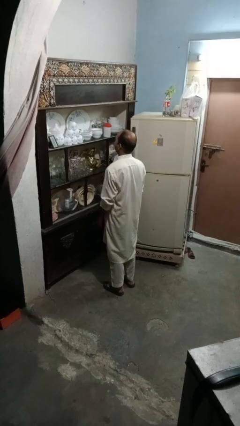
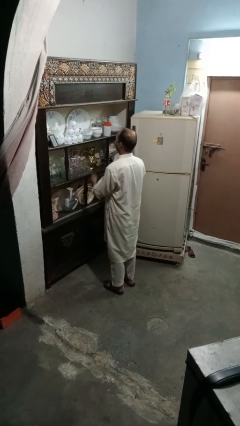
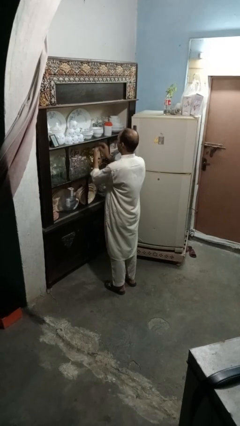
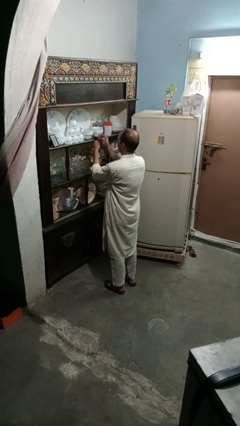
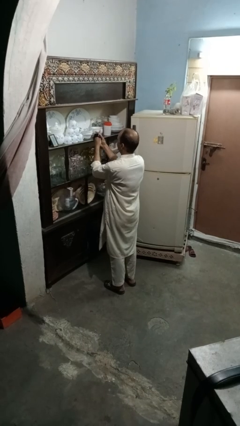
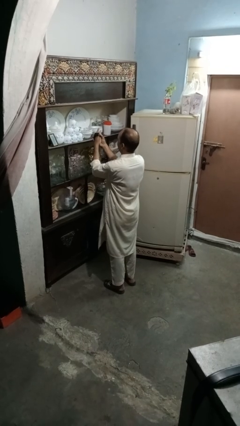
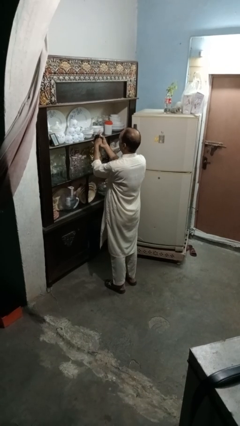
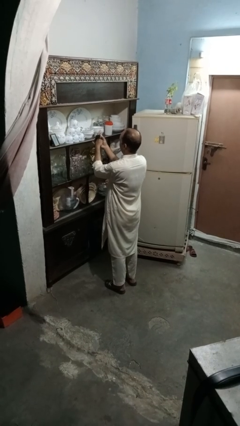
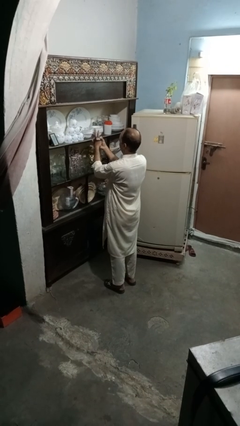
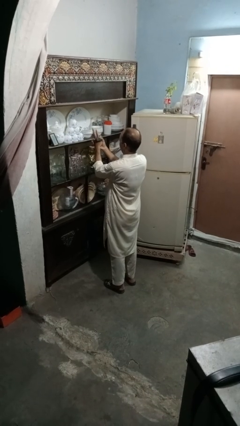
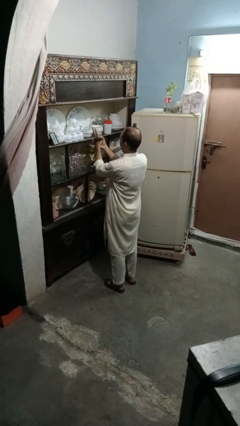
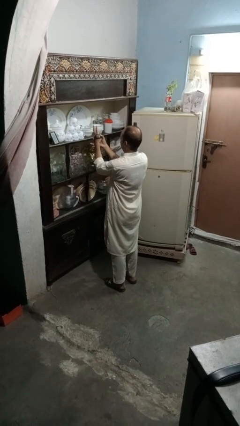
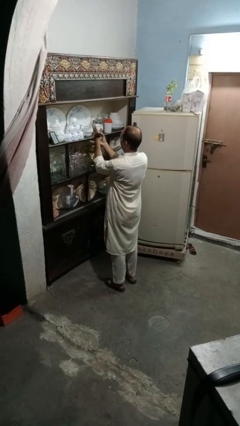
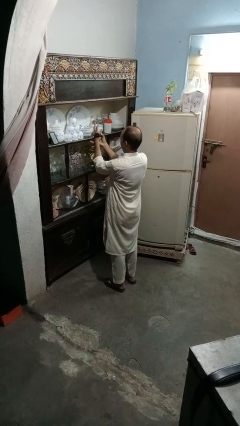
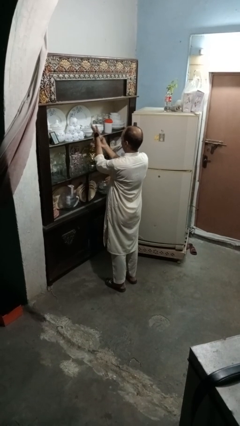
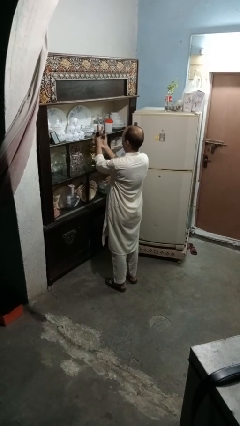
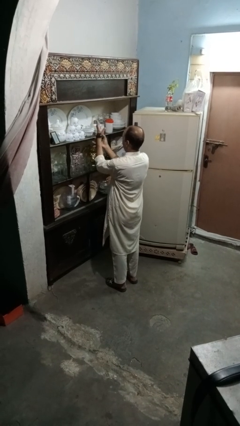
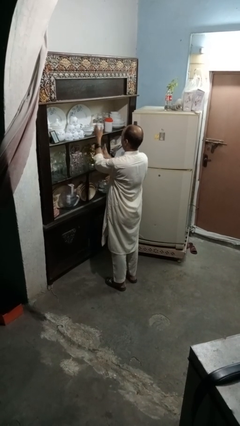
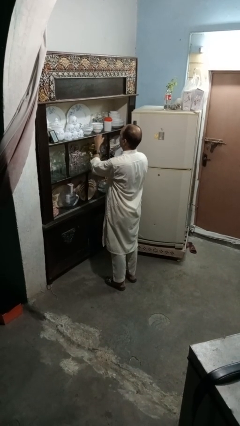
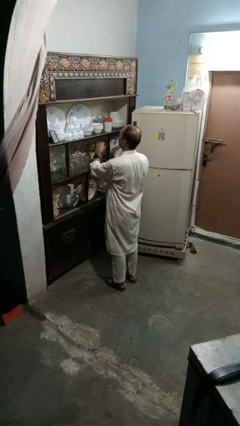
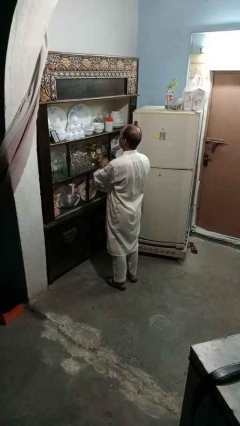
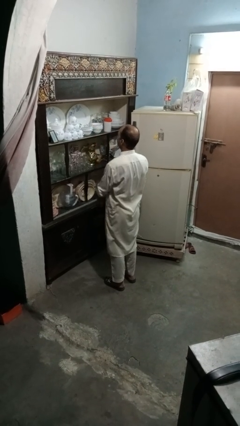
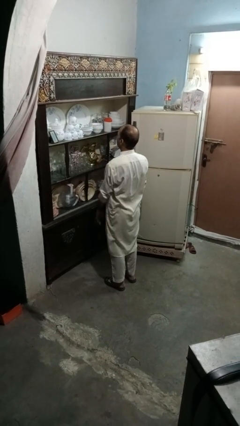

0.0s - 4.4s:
person puts on wristwatch

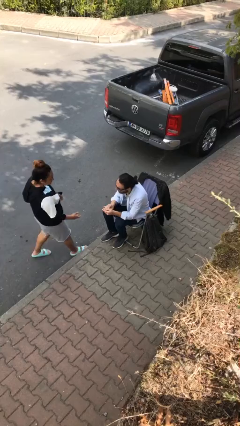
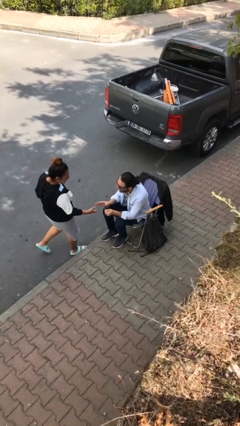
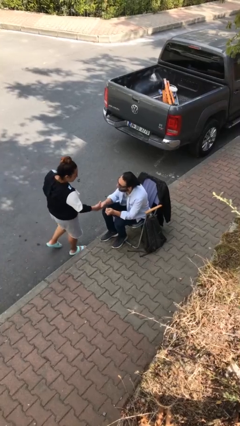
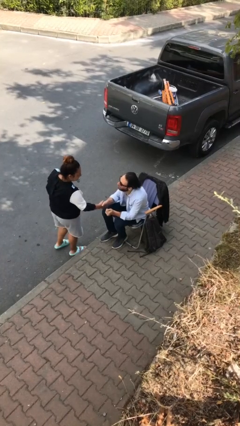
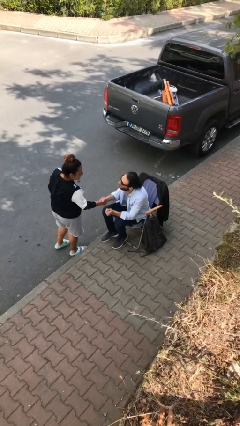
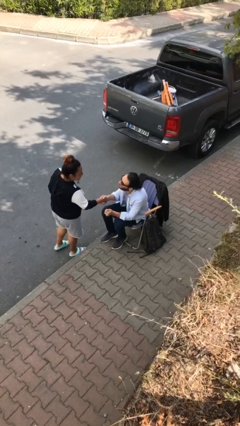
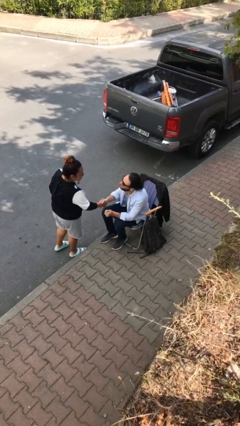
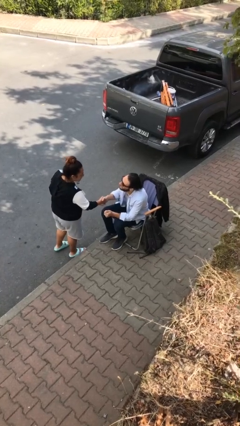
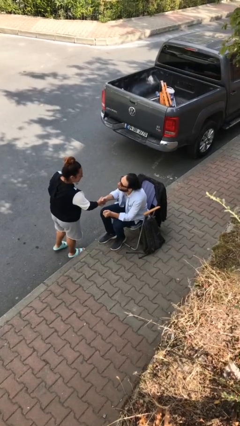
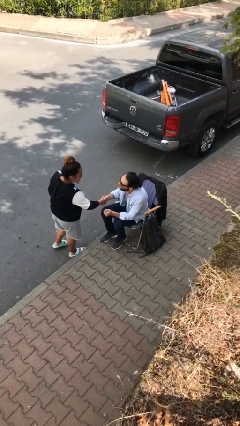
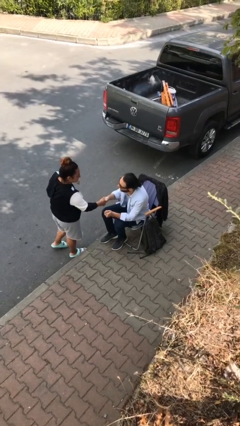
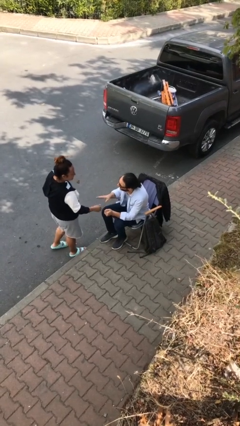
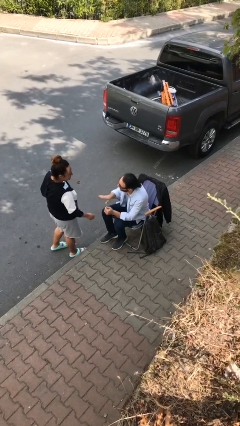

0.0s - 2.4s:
person shakes hand

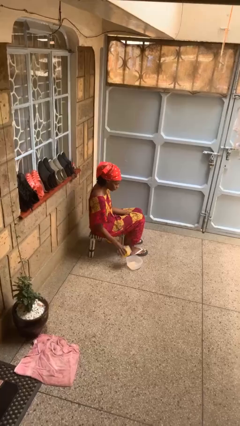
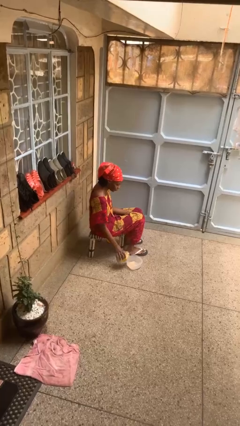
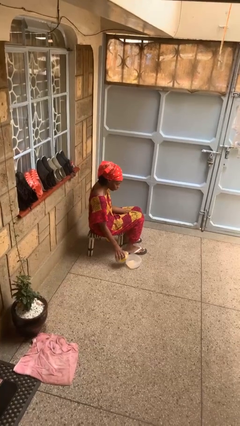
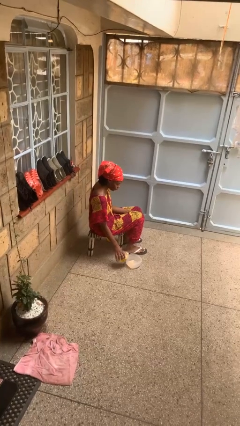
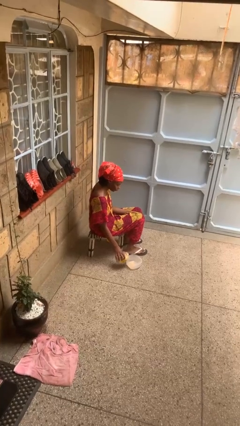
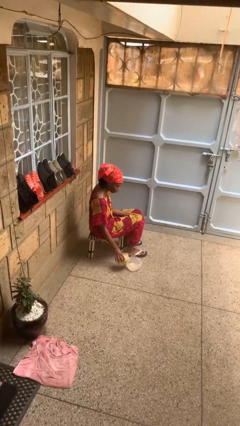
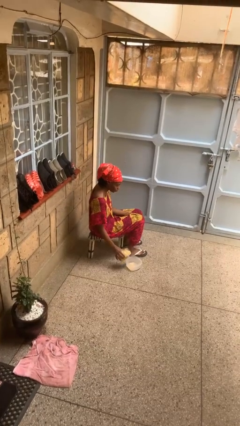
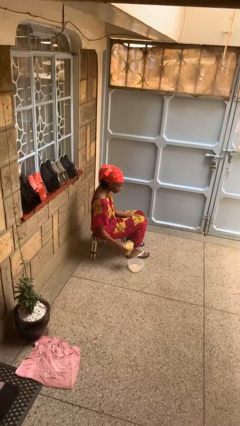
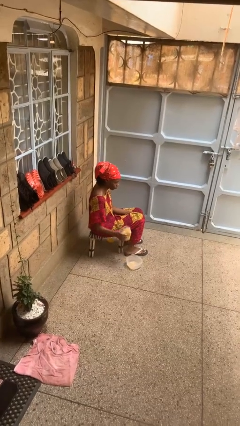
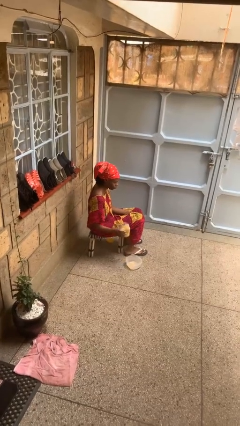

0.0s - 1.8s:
person pours into bowl

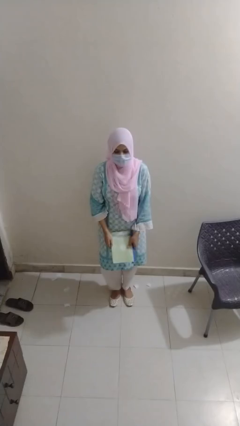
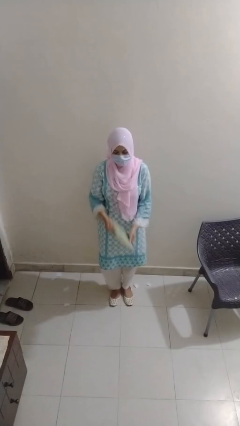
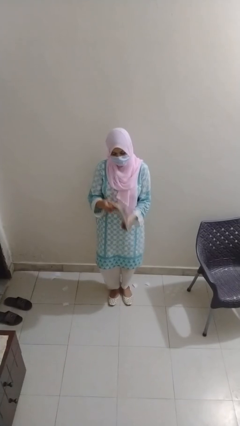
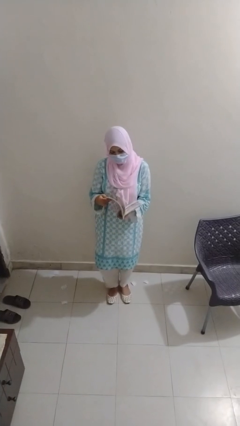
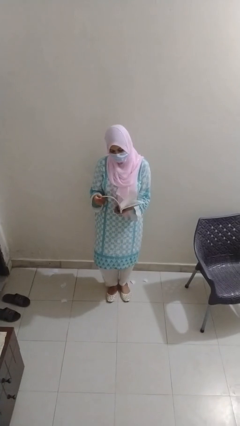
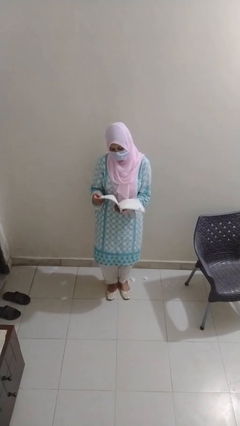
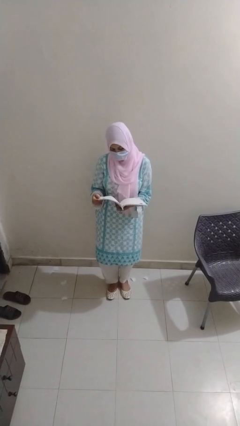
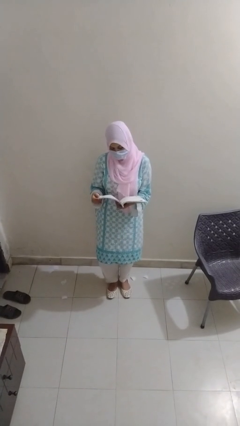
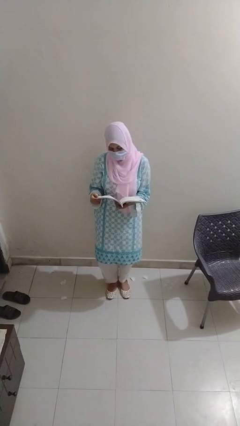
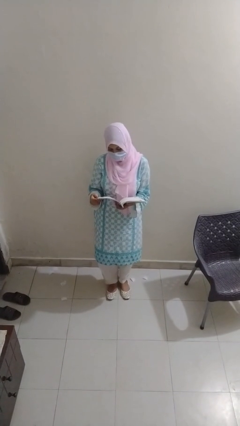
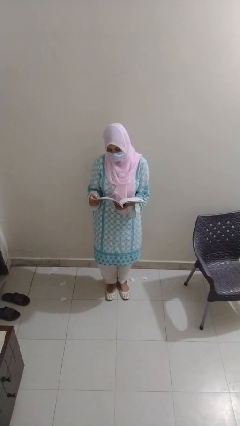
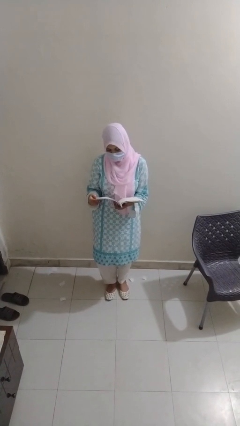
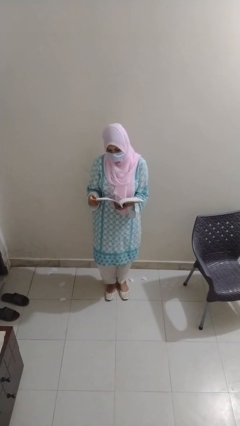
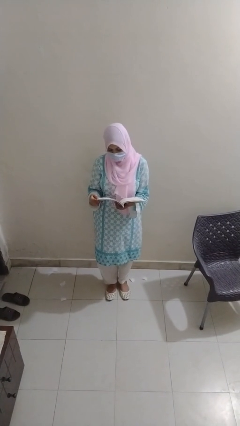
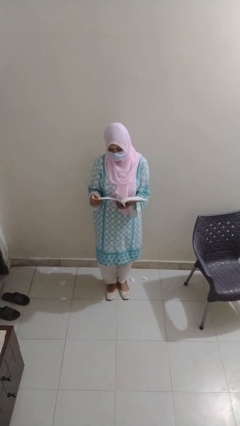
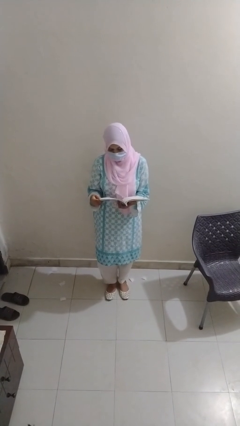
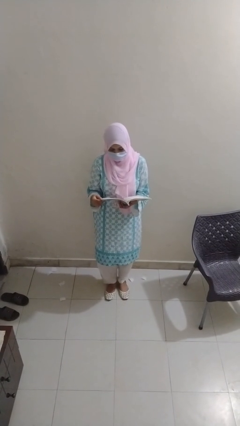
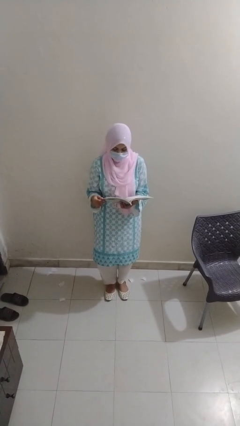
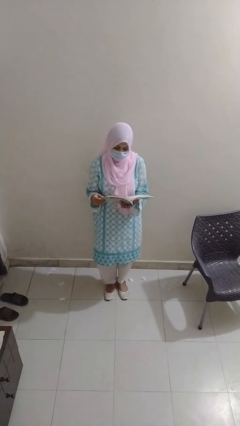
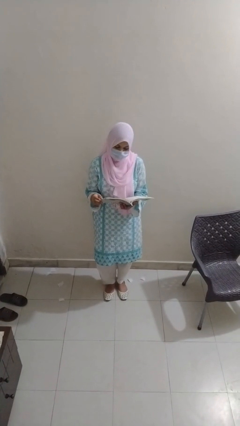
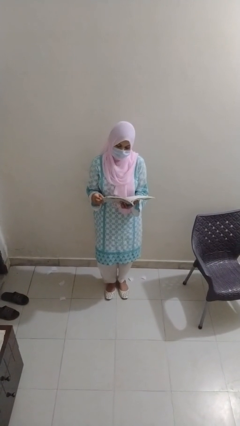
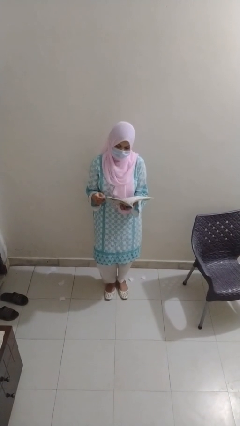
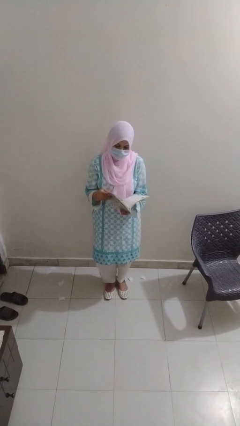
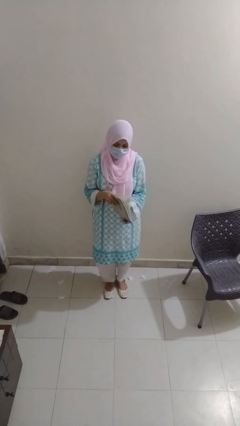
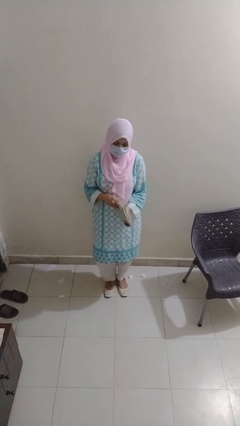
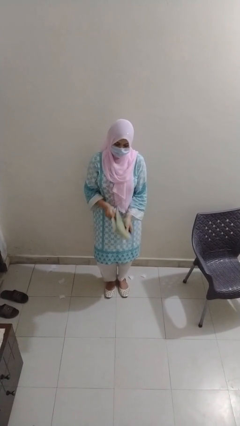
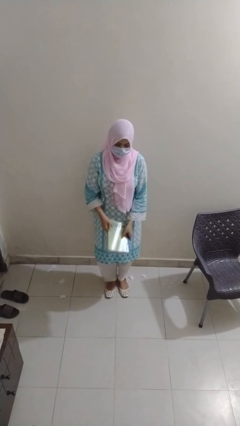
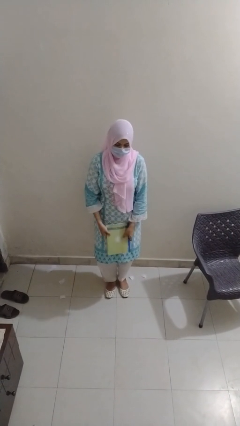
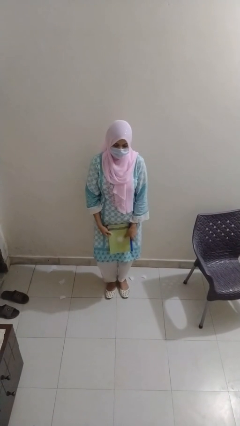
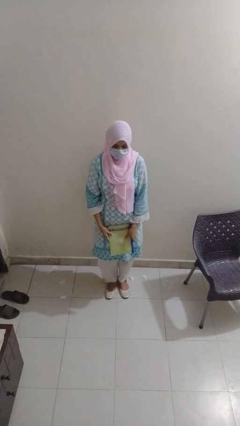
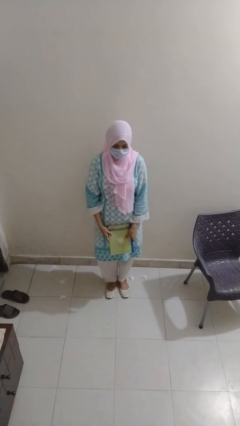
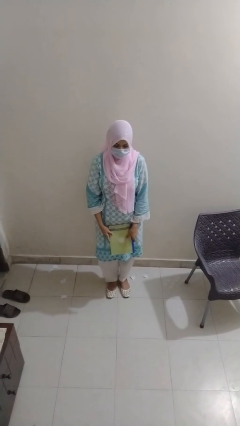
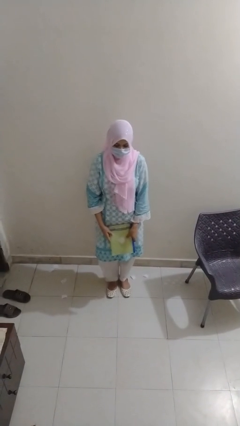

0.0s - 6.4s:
person reads book

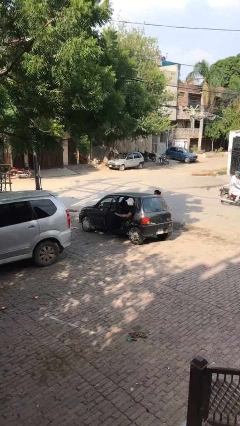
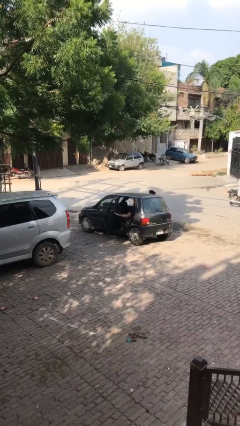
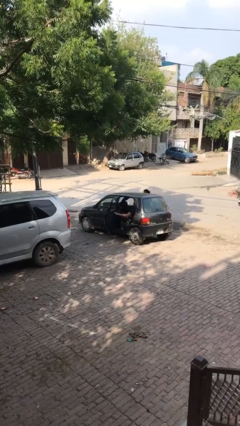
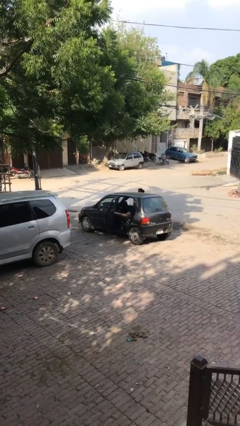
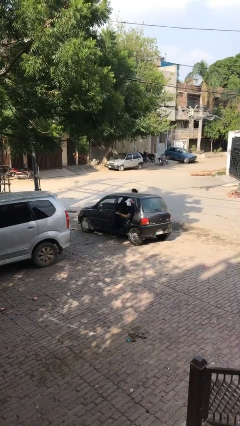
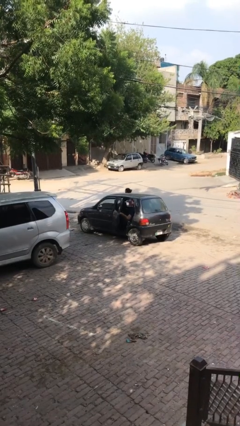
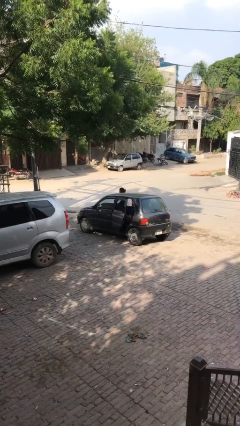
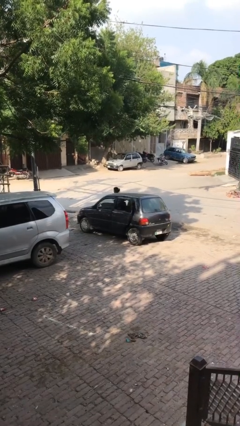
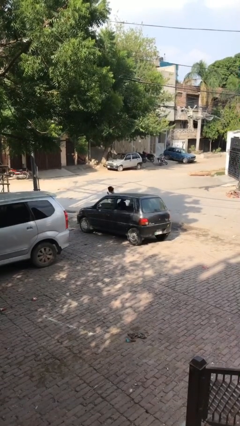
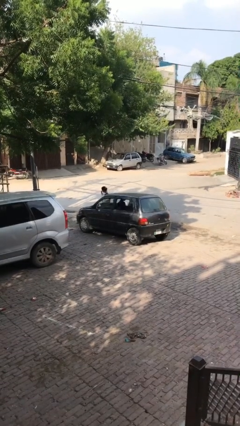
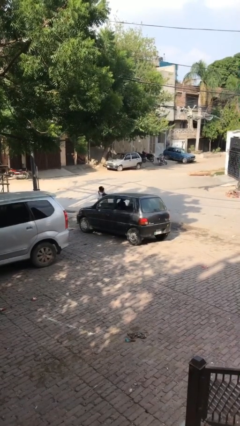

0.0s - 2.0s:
person closes car door

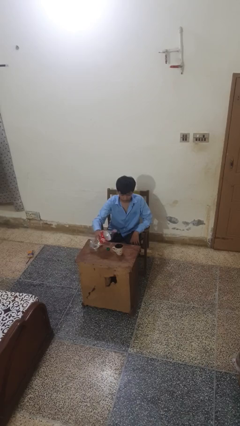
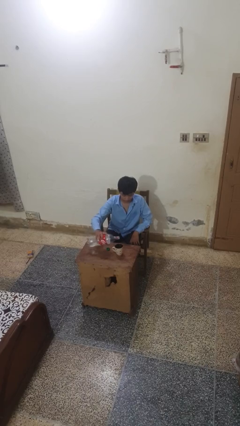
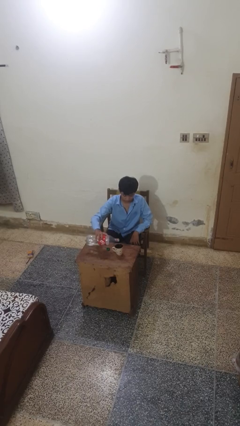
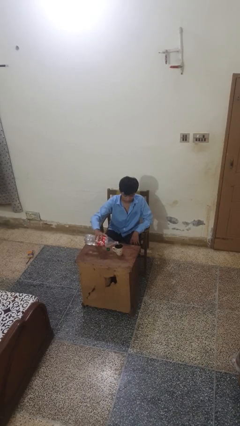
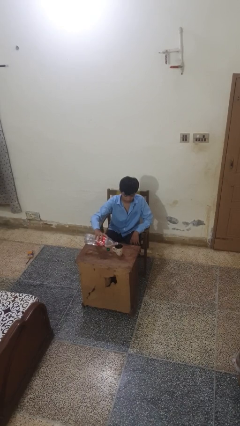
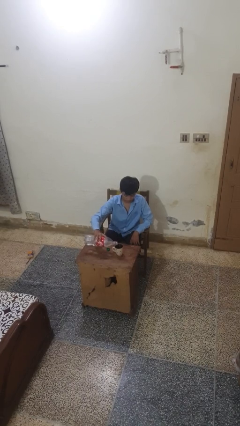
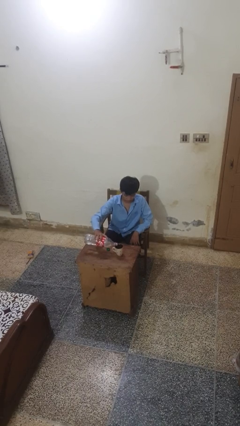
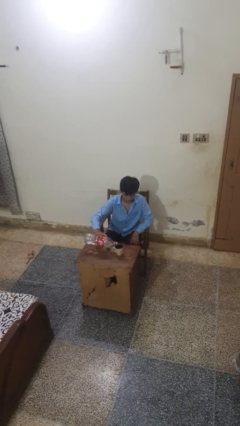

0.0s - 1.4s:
person pours liquid into cup
